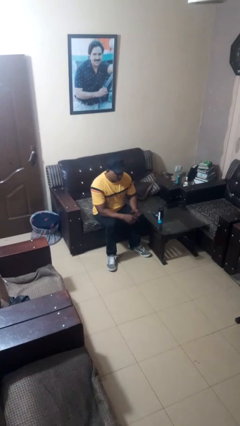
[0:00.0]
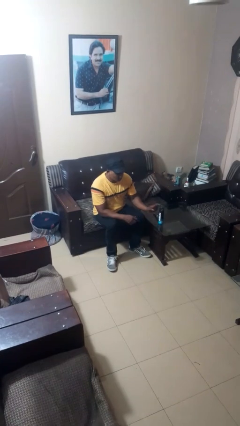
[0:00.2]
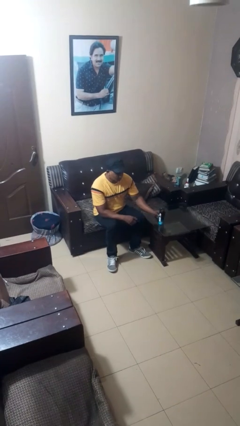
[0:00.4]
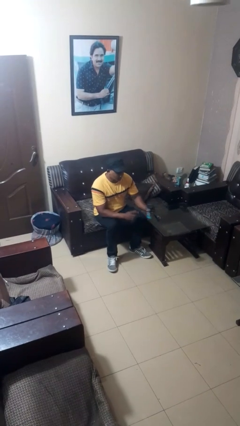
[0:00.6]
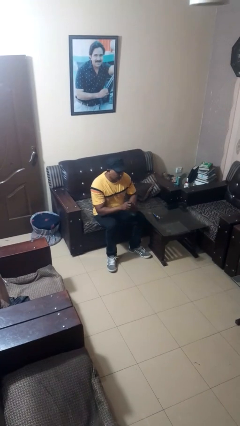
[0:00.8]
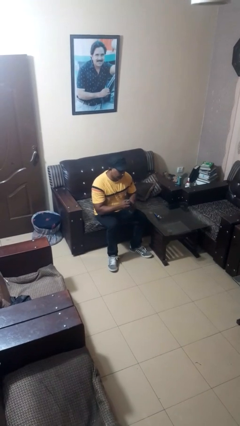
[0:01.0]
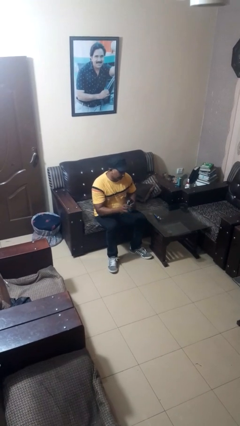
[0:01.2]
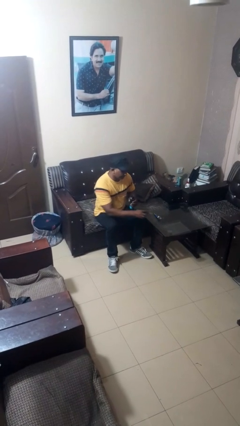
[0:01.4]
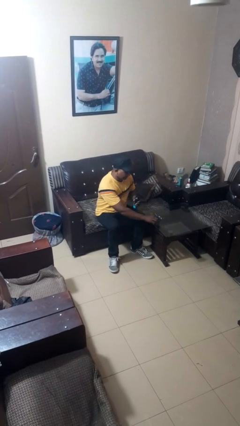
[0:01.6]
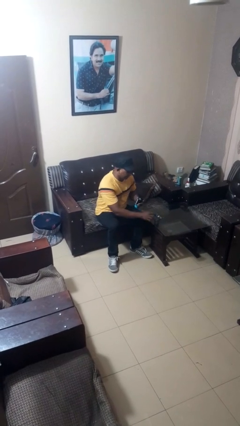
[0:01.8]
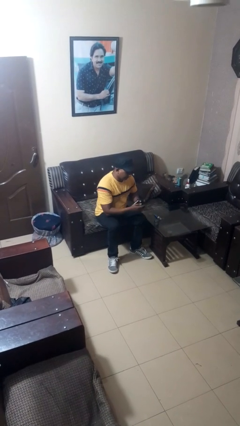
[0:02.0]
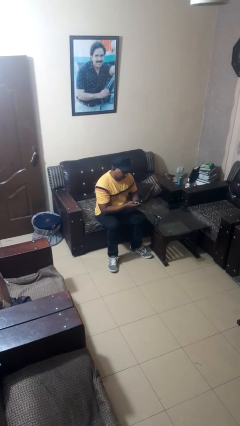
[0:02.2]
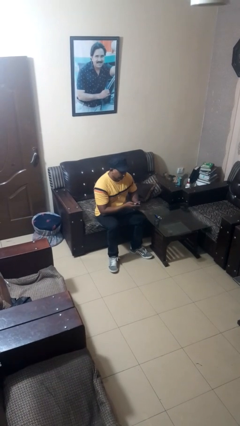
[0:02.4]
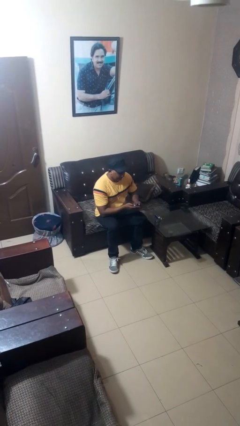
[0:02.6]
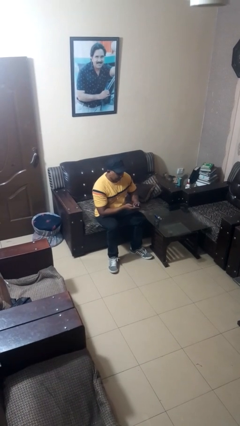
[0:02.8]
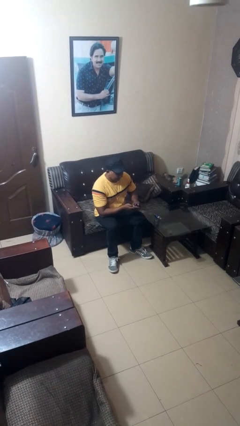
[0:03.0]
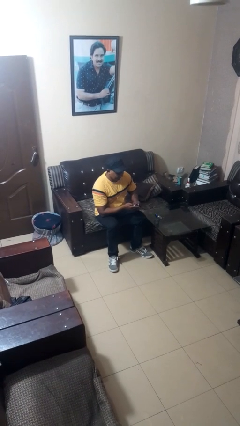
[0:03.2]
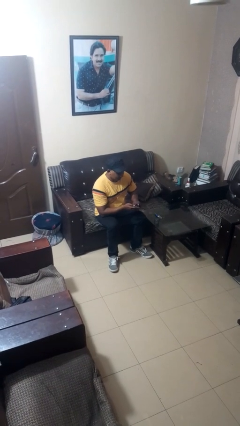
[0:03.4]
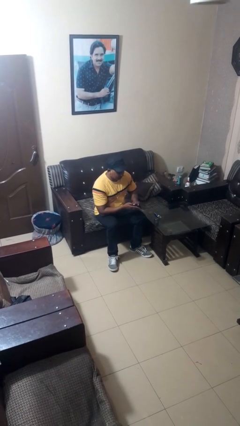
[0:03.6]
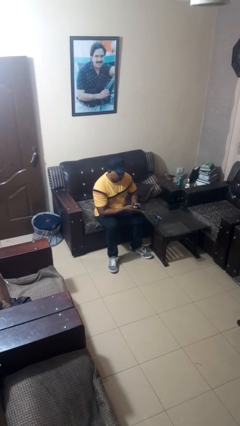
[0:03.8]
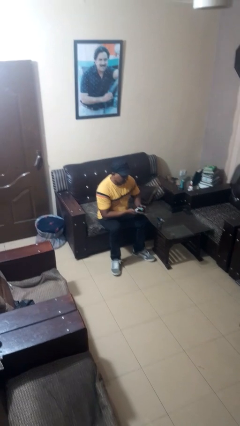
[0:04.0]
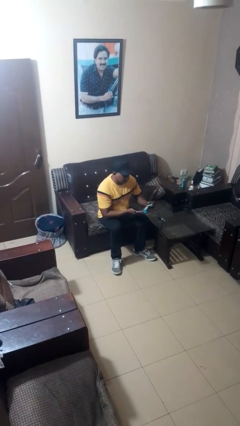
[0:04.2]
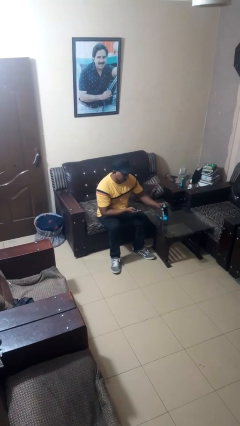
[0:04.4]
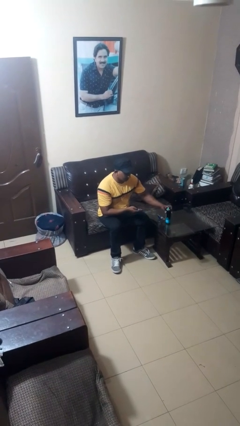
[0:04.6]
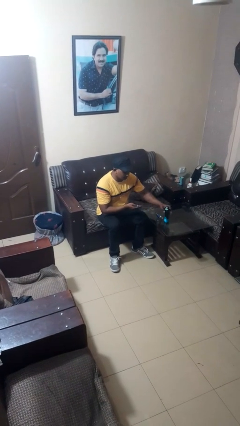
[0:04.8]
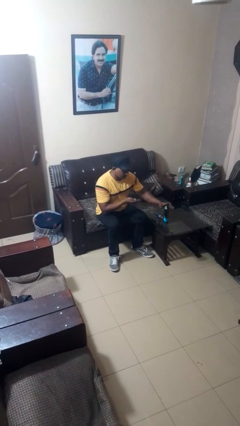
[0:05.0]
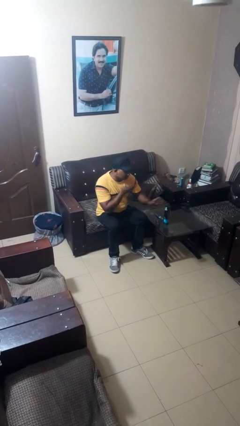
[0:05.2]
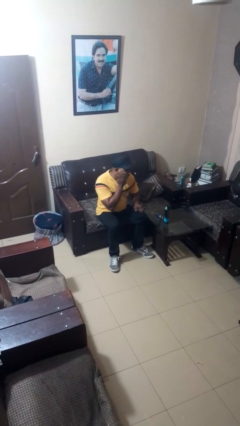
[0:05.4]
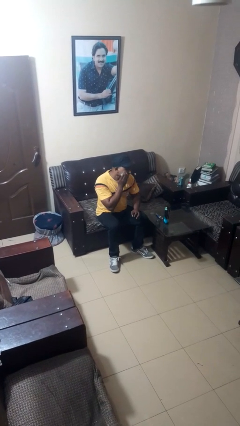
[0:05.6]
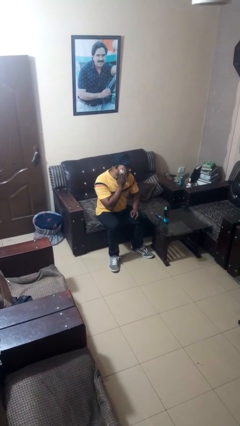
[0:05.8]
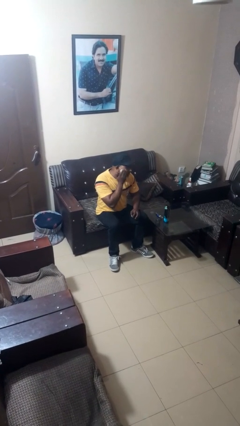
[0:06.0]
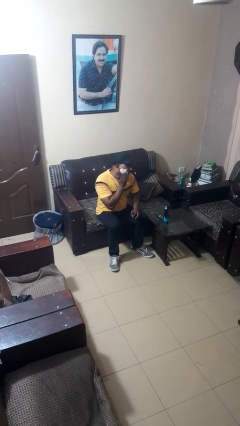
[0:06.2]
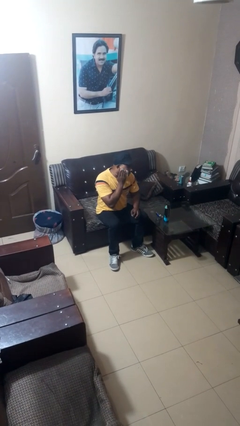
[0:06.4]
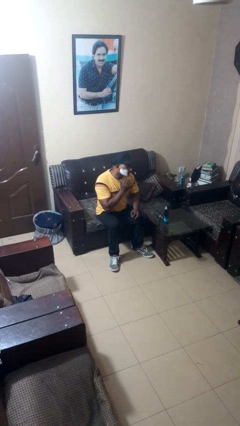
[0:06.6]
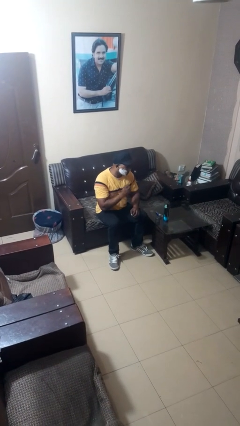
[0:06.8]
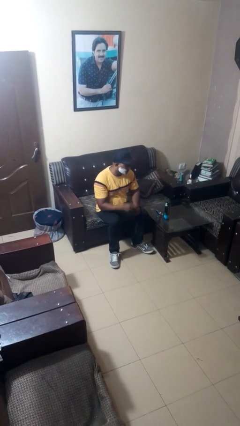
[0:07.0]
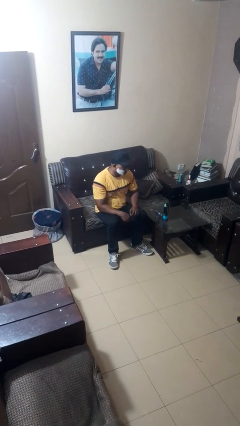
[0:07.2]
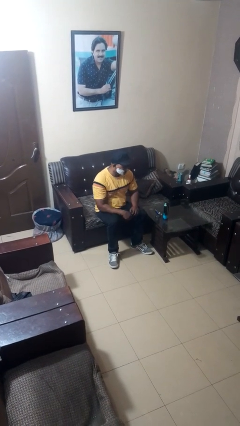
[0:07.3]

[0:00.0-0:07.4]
person applies shaving cream

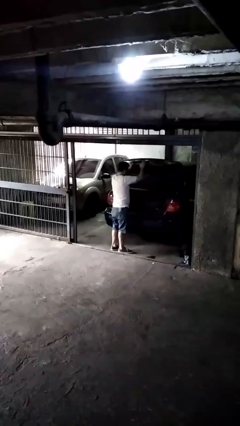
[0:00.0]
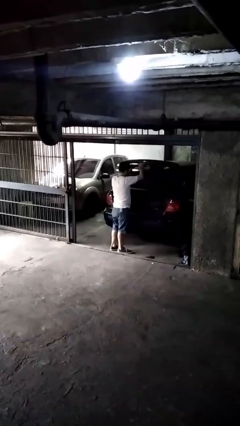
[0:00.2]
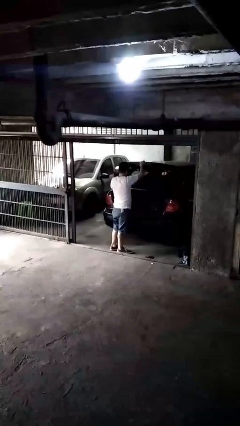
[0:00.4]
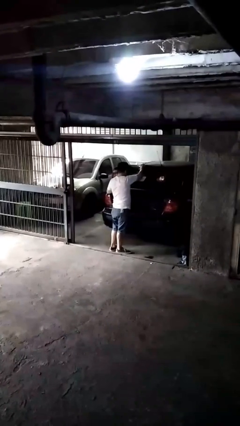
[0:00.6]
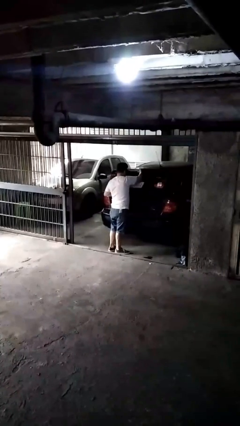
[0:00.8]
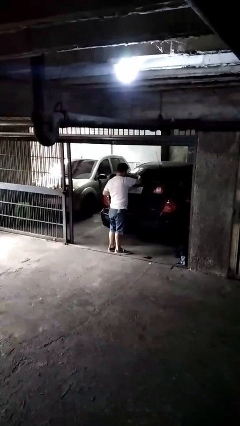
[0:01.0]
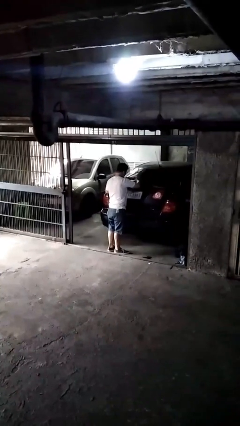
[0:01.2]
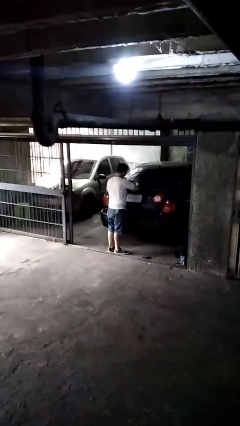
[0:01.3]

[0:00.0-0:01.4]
person closes car trunk

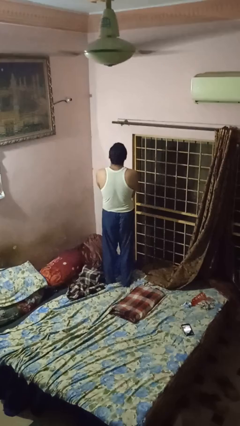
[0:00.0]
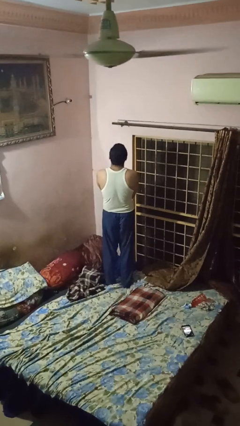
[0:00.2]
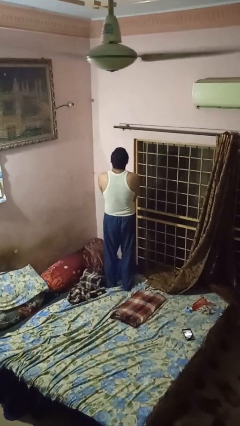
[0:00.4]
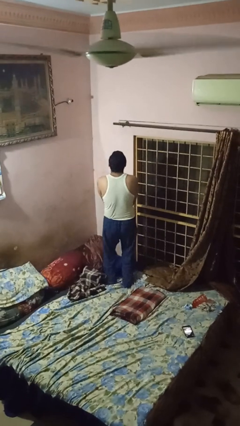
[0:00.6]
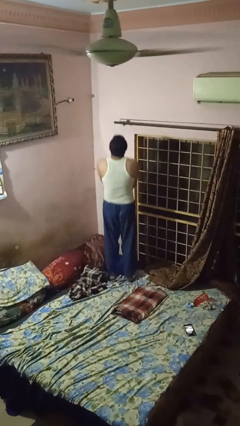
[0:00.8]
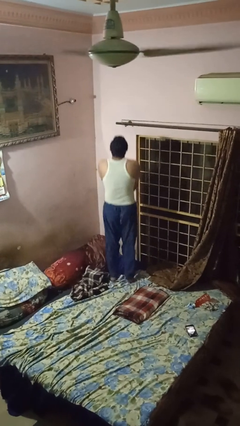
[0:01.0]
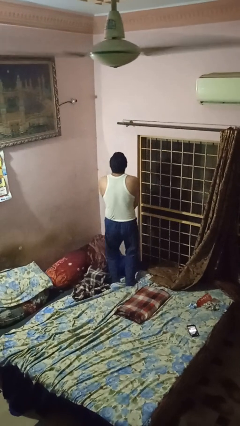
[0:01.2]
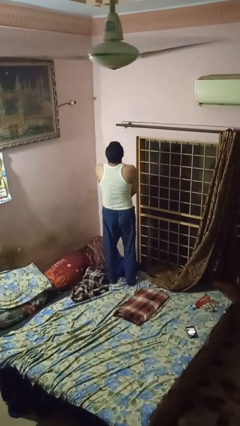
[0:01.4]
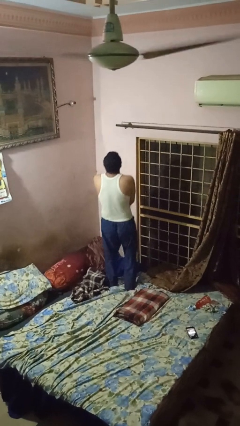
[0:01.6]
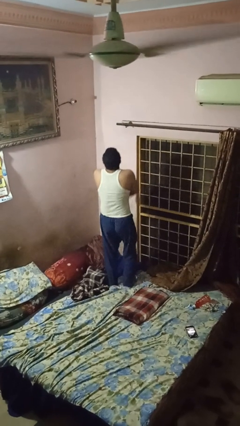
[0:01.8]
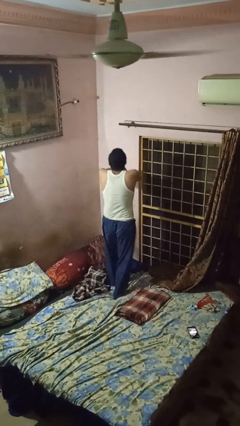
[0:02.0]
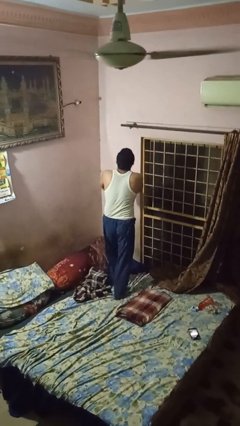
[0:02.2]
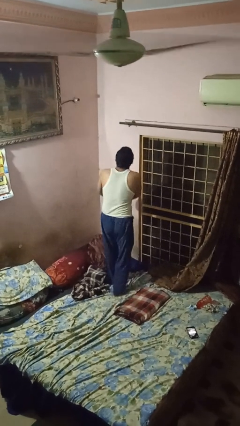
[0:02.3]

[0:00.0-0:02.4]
person jumps on bed

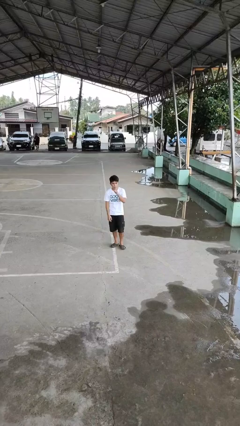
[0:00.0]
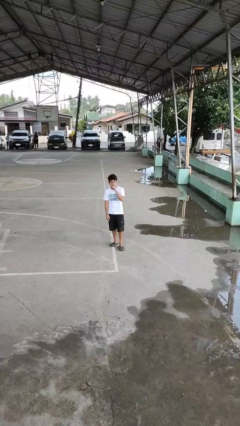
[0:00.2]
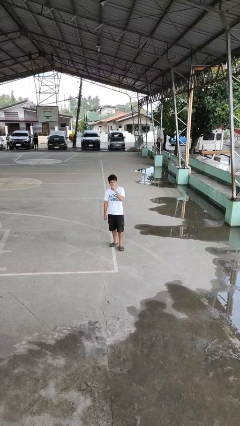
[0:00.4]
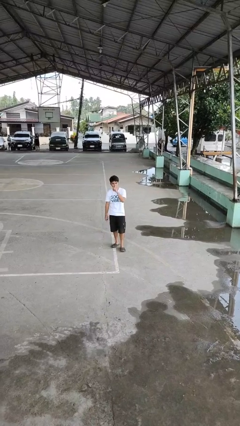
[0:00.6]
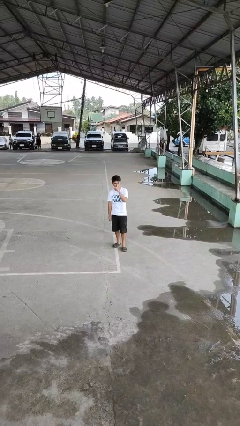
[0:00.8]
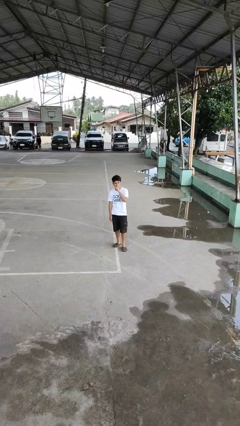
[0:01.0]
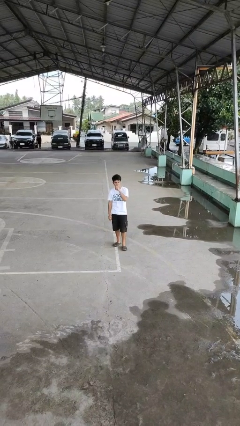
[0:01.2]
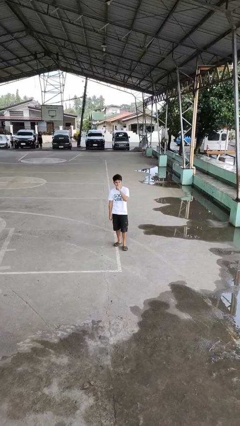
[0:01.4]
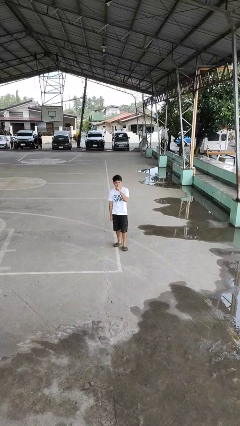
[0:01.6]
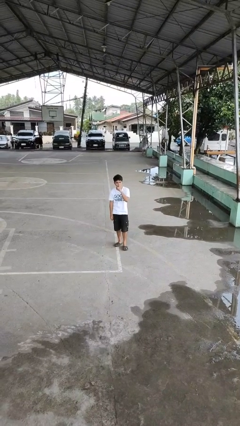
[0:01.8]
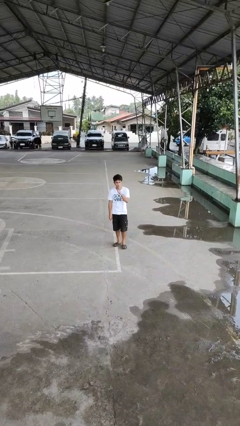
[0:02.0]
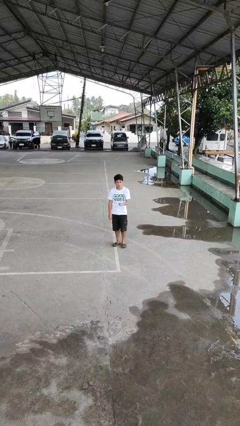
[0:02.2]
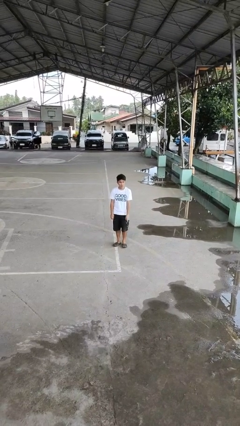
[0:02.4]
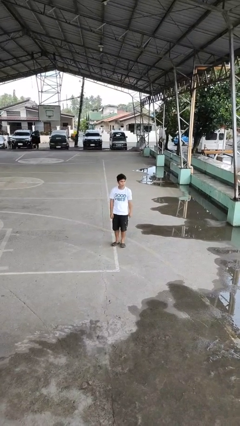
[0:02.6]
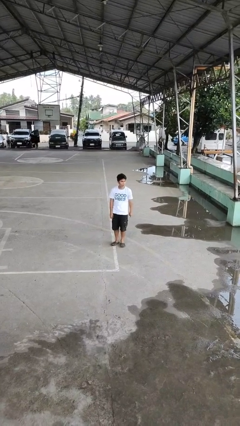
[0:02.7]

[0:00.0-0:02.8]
person gestures be quiet

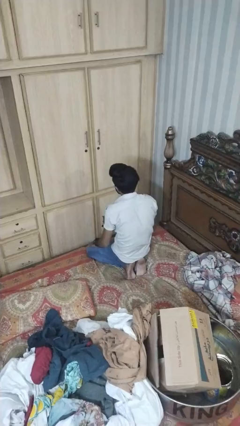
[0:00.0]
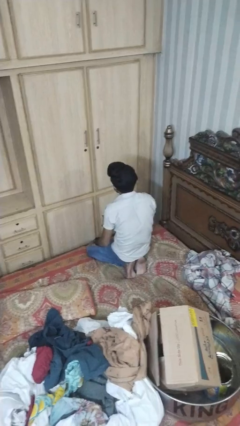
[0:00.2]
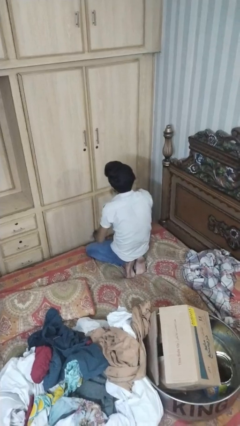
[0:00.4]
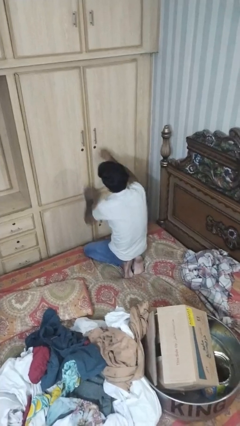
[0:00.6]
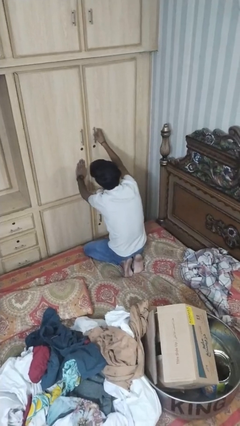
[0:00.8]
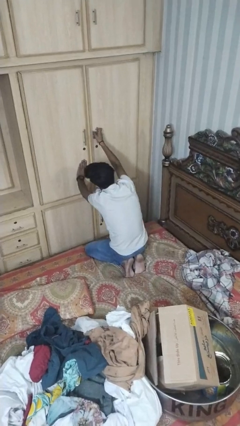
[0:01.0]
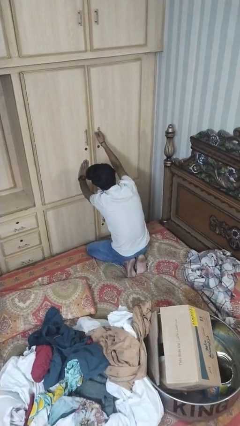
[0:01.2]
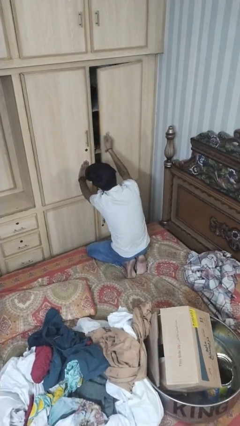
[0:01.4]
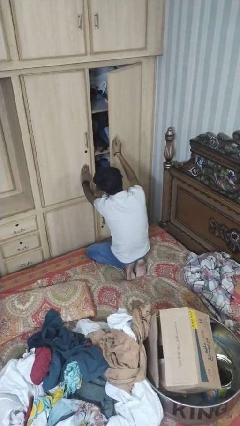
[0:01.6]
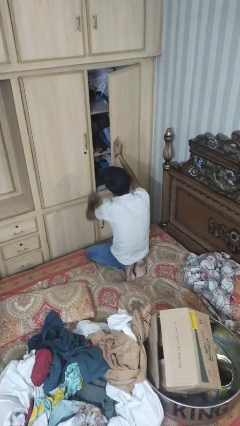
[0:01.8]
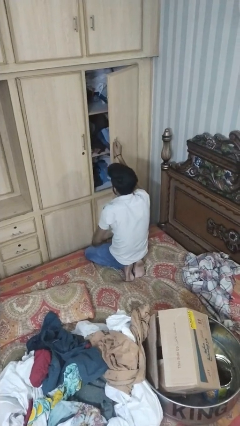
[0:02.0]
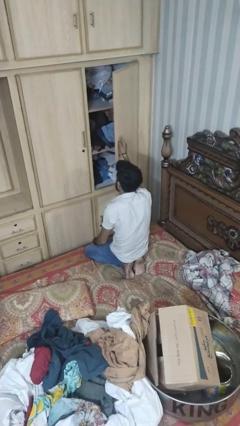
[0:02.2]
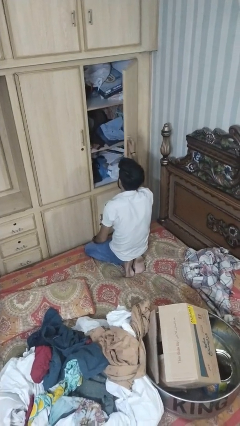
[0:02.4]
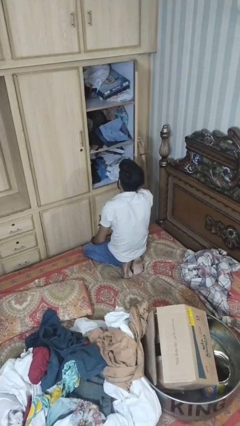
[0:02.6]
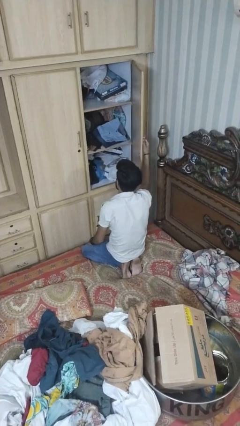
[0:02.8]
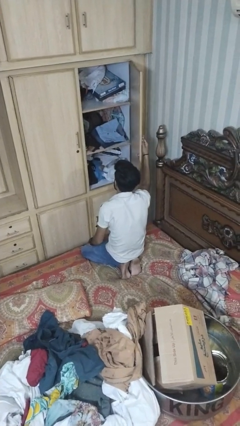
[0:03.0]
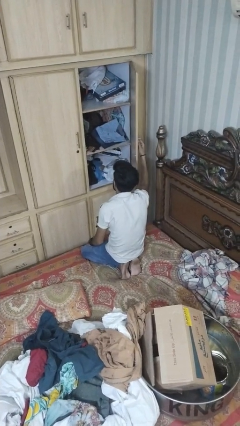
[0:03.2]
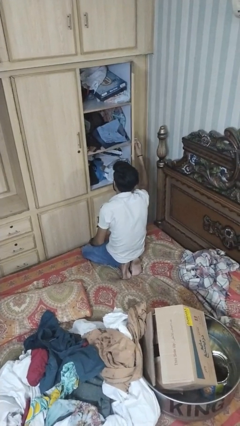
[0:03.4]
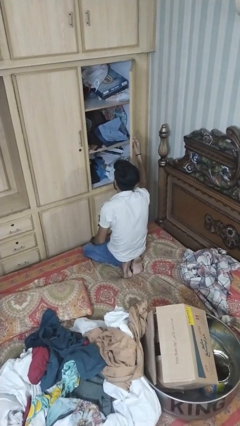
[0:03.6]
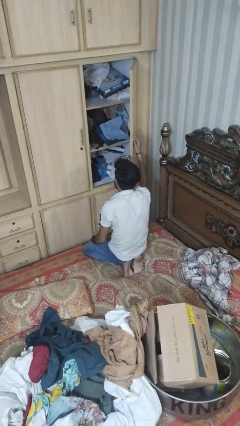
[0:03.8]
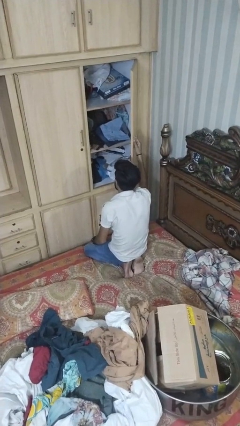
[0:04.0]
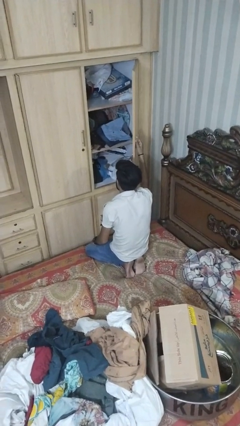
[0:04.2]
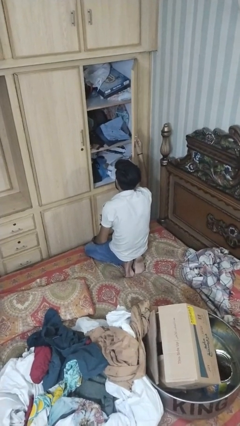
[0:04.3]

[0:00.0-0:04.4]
person opens dresser drawer
